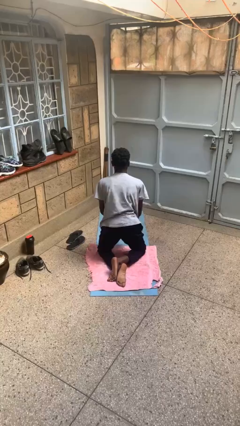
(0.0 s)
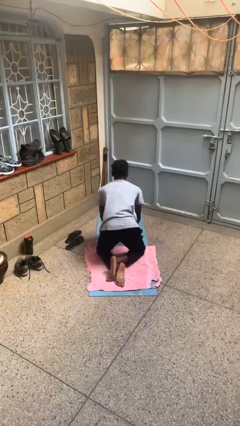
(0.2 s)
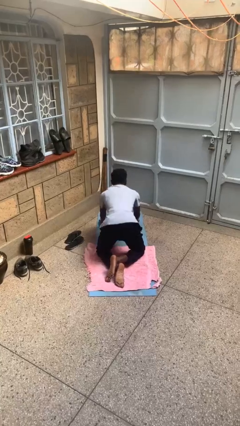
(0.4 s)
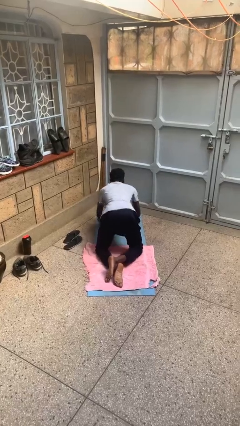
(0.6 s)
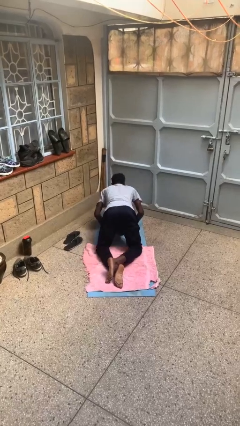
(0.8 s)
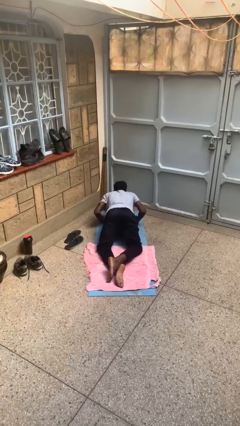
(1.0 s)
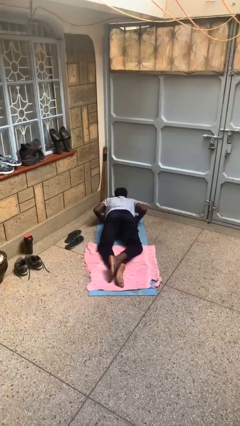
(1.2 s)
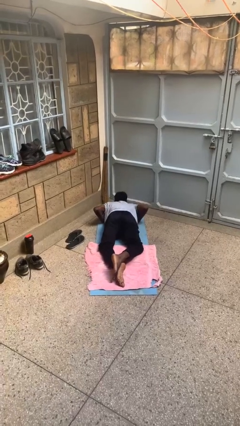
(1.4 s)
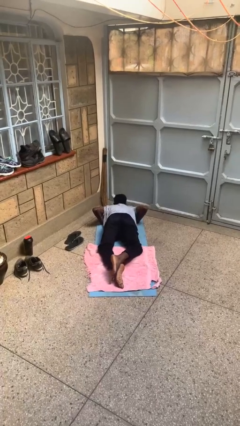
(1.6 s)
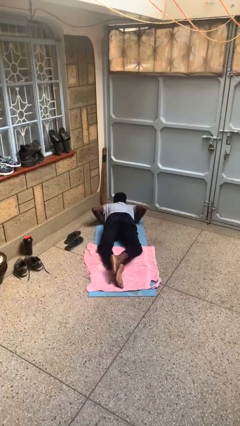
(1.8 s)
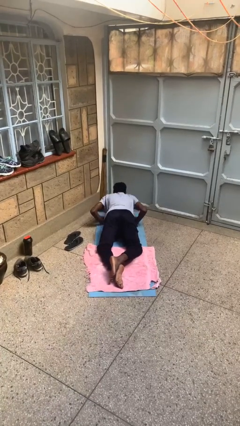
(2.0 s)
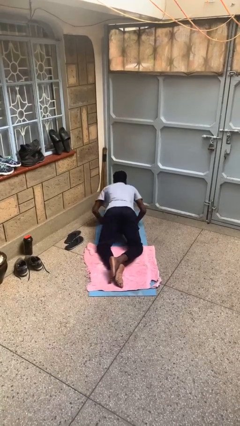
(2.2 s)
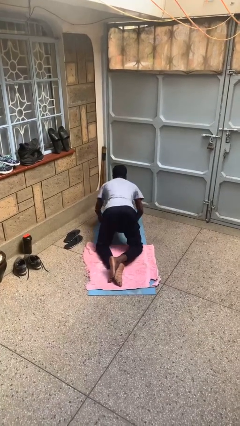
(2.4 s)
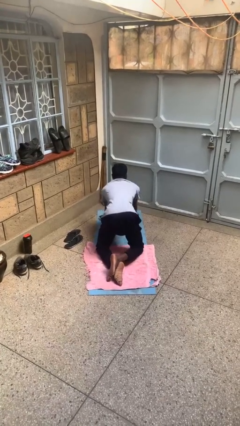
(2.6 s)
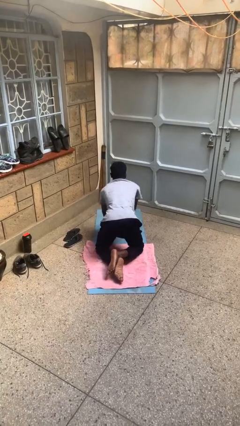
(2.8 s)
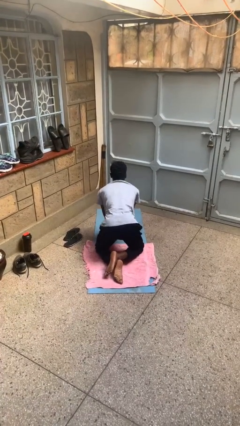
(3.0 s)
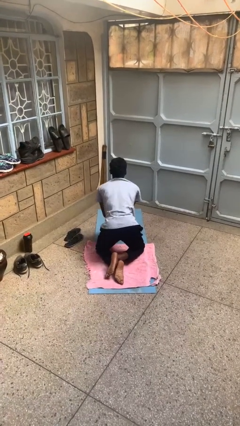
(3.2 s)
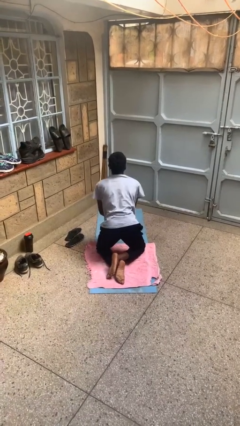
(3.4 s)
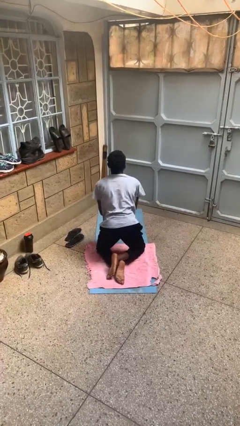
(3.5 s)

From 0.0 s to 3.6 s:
person exercises with pushup

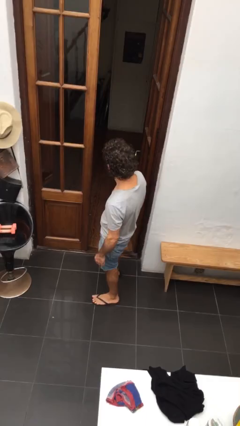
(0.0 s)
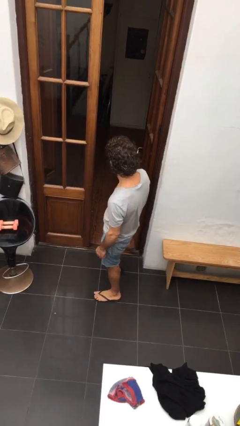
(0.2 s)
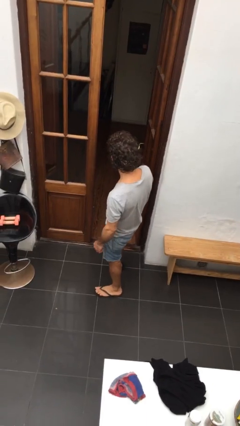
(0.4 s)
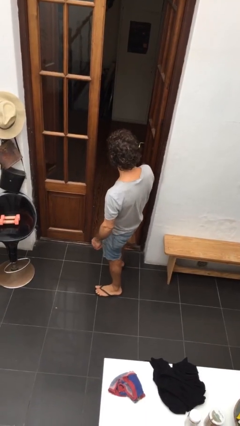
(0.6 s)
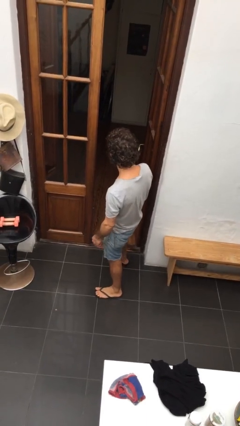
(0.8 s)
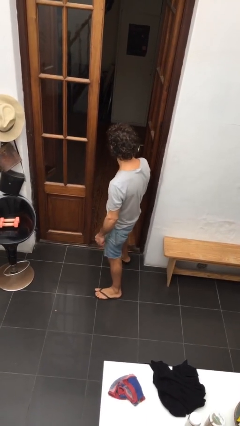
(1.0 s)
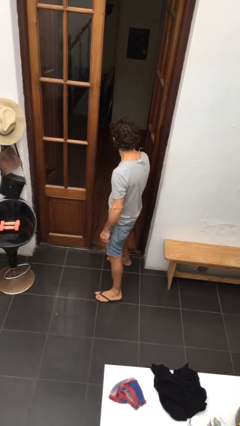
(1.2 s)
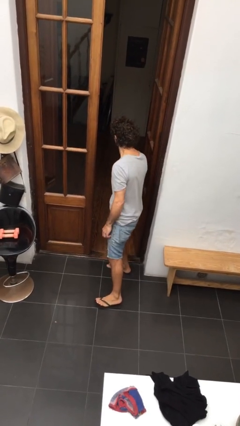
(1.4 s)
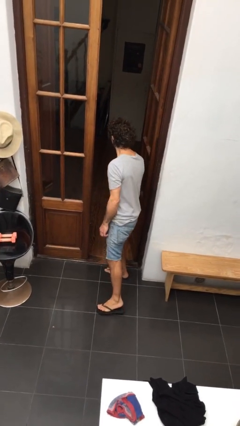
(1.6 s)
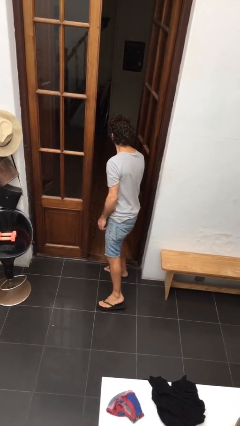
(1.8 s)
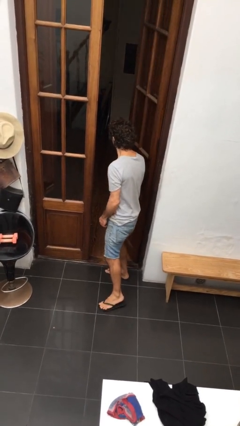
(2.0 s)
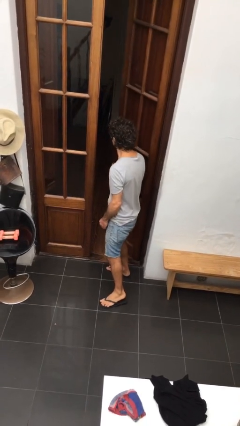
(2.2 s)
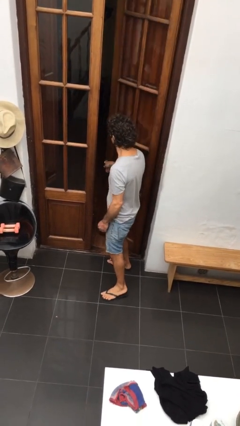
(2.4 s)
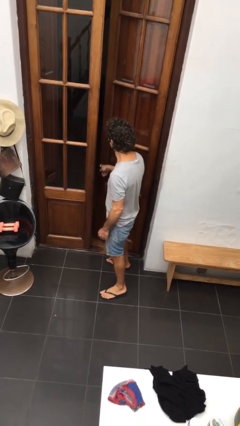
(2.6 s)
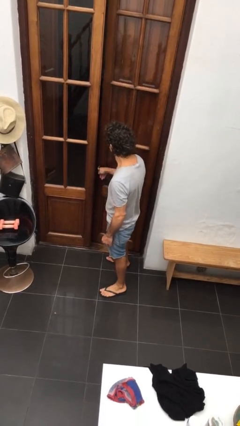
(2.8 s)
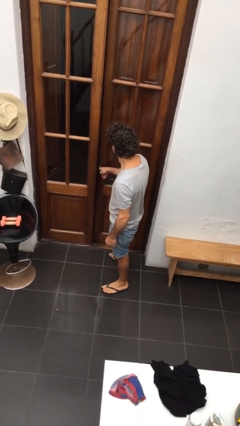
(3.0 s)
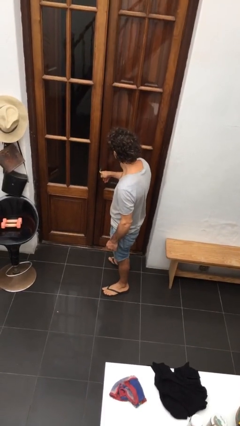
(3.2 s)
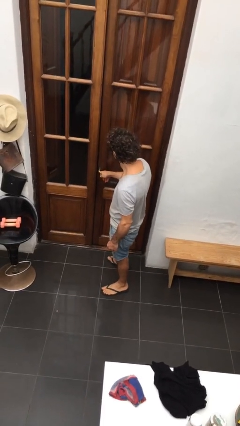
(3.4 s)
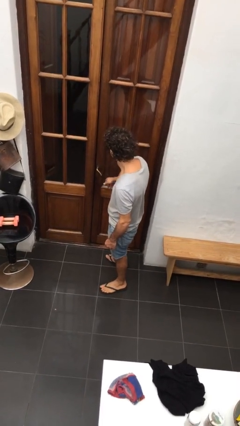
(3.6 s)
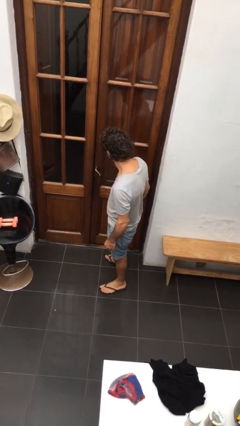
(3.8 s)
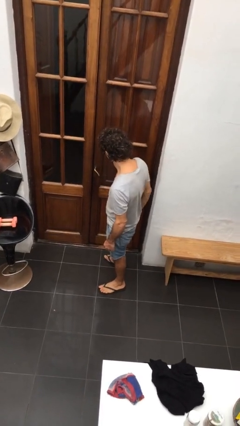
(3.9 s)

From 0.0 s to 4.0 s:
person closes facility door

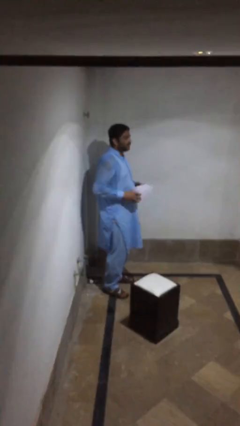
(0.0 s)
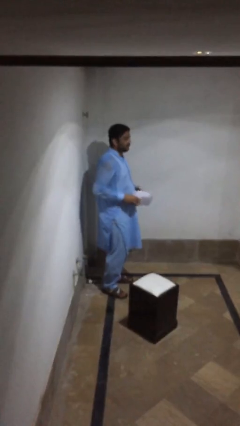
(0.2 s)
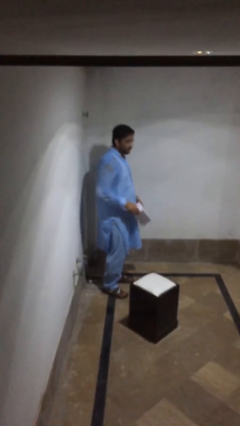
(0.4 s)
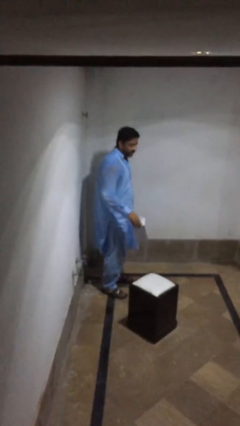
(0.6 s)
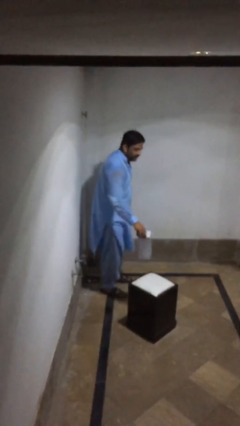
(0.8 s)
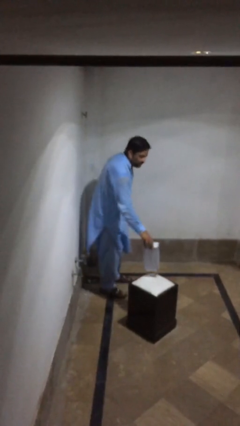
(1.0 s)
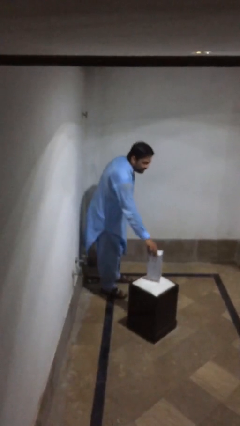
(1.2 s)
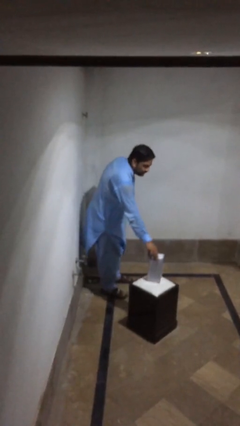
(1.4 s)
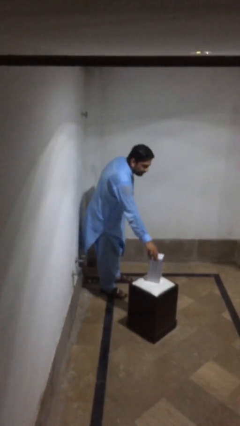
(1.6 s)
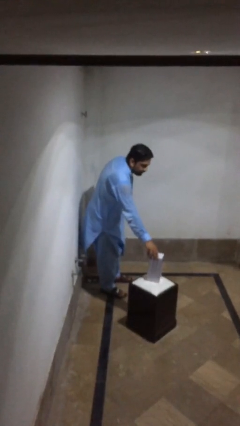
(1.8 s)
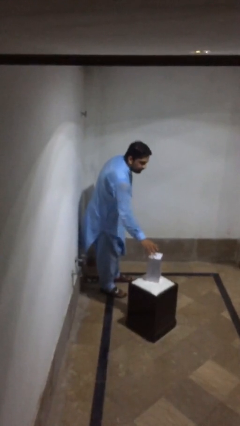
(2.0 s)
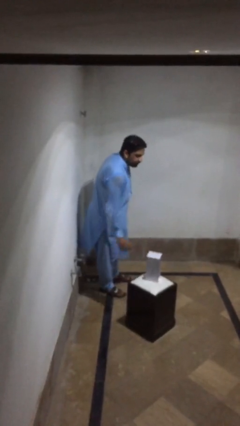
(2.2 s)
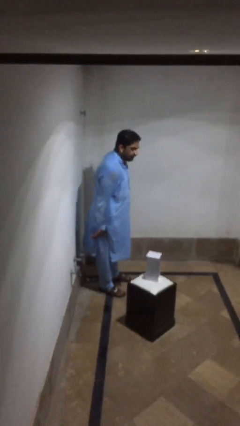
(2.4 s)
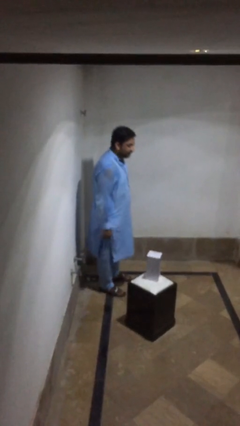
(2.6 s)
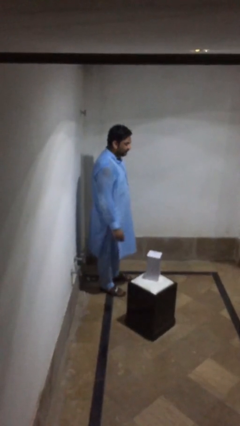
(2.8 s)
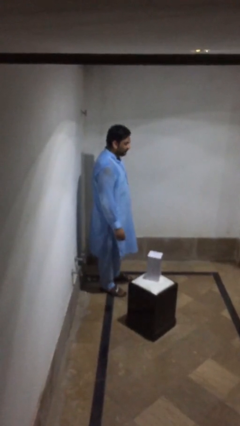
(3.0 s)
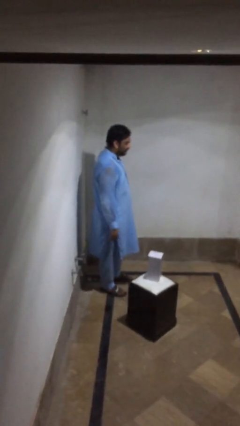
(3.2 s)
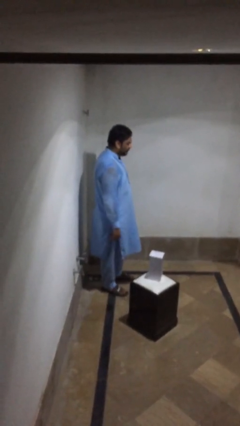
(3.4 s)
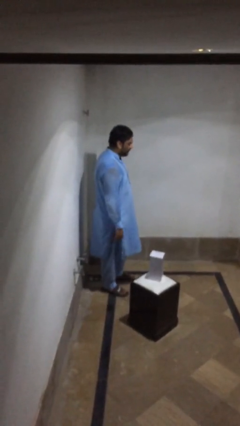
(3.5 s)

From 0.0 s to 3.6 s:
person puts down object on table

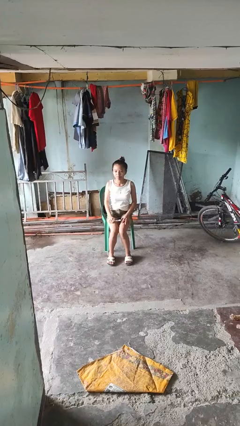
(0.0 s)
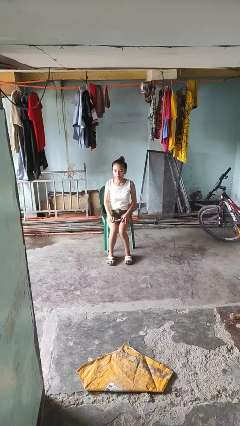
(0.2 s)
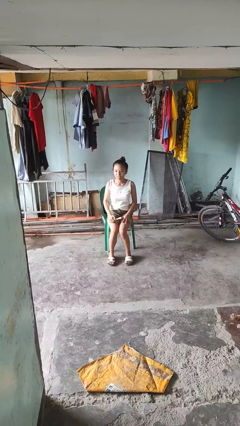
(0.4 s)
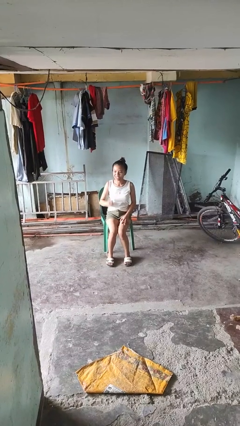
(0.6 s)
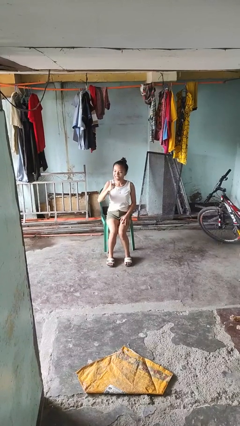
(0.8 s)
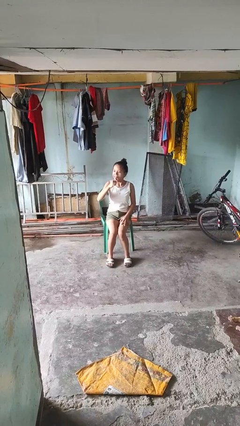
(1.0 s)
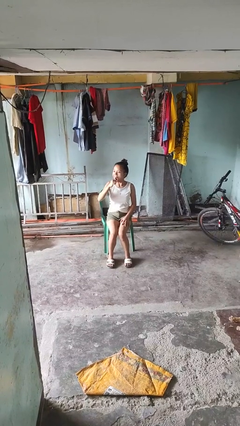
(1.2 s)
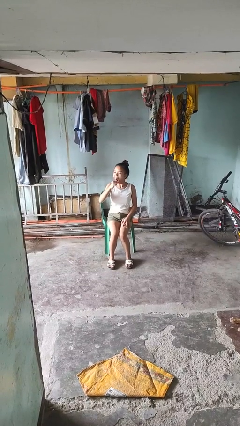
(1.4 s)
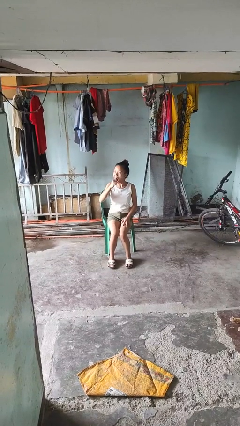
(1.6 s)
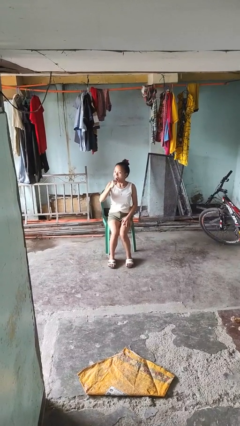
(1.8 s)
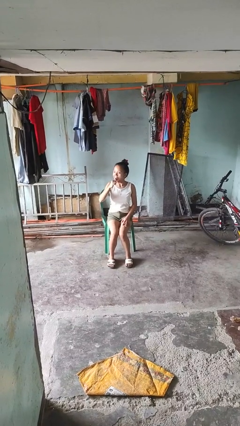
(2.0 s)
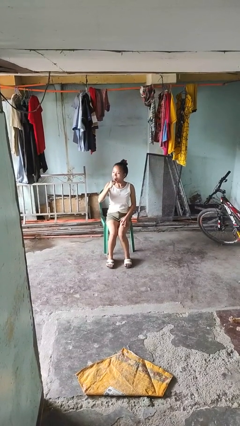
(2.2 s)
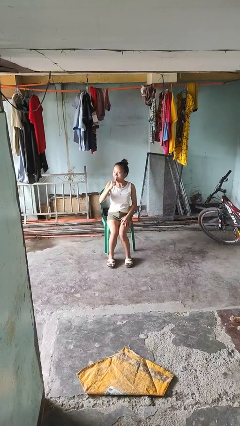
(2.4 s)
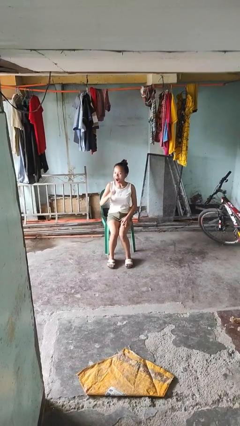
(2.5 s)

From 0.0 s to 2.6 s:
person brushes teeth

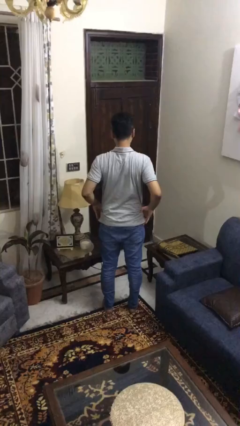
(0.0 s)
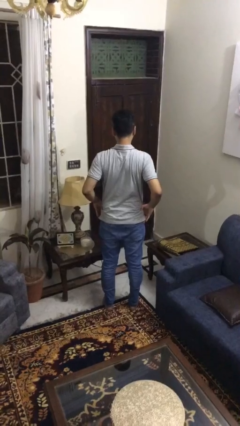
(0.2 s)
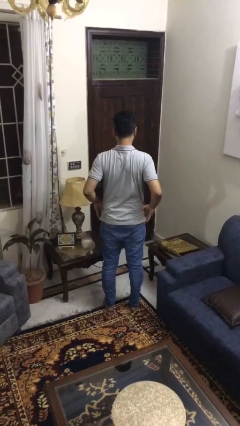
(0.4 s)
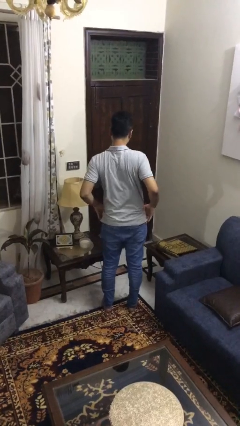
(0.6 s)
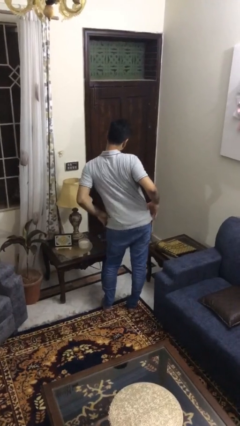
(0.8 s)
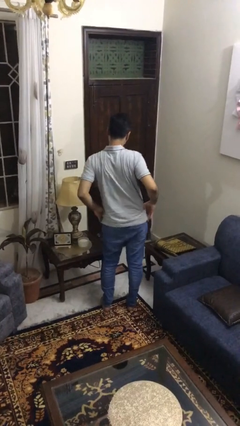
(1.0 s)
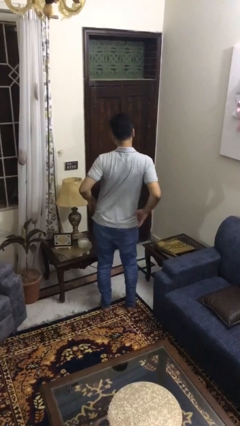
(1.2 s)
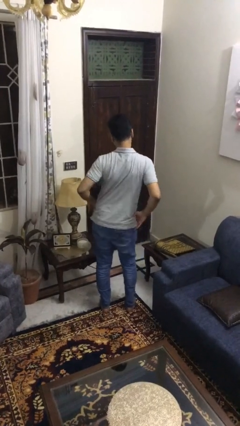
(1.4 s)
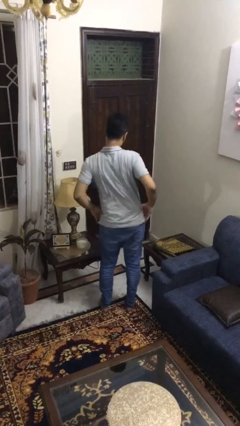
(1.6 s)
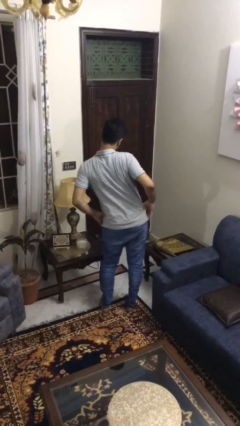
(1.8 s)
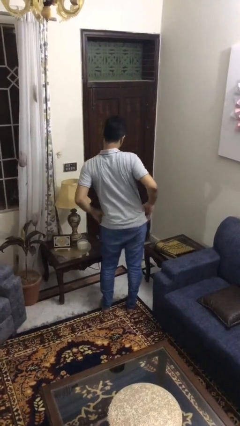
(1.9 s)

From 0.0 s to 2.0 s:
person wiggles hips

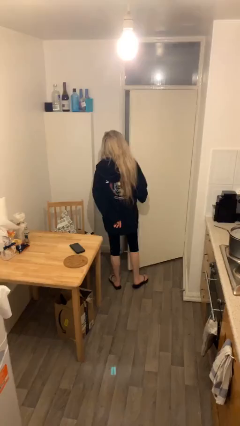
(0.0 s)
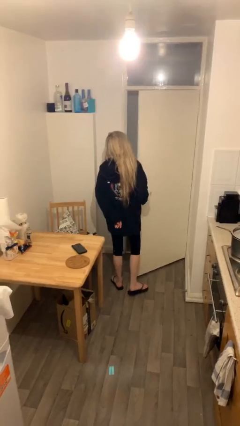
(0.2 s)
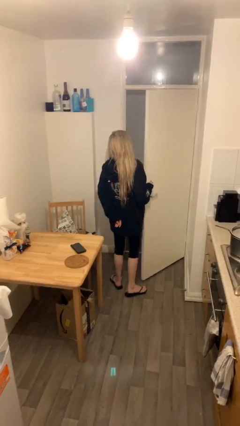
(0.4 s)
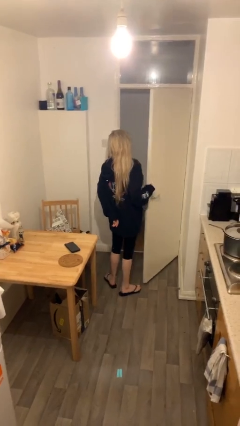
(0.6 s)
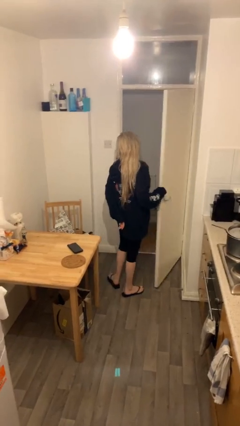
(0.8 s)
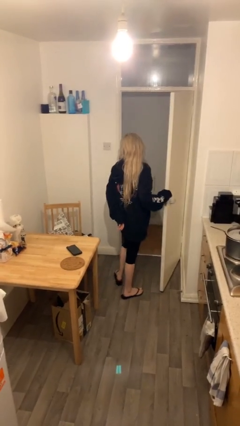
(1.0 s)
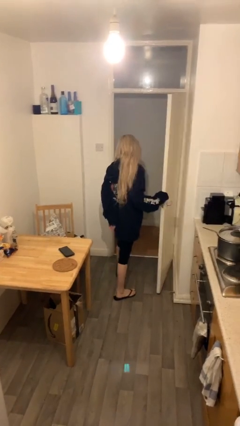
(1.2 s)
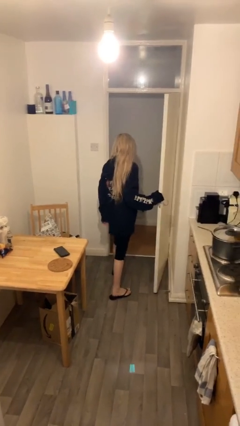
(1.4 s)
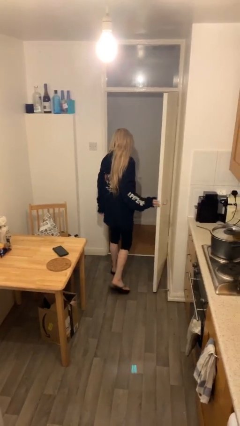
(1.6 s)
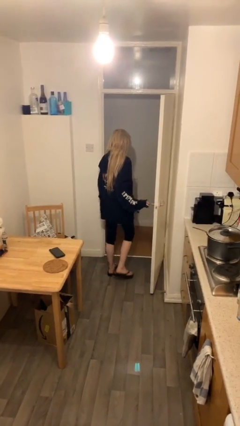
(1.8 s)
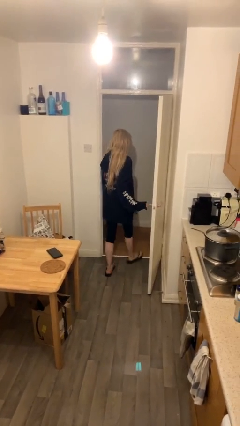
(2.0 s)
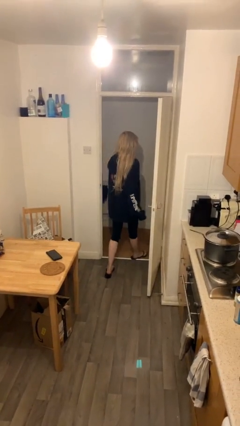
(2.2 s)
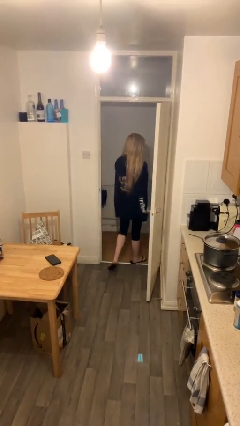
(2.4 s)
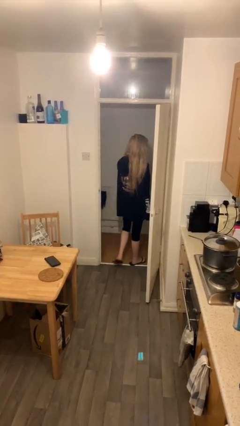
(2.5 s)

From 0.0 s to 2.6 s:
person exits scene through structure
